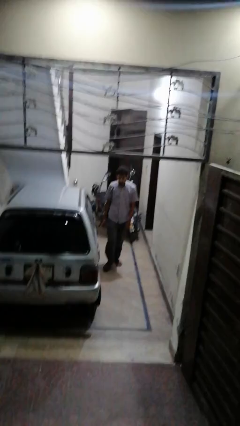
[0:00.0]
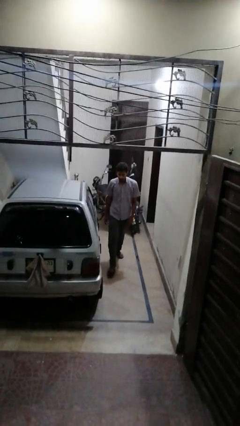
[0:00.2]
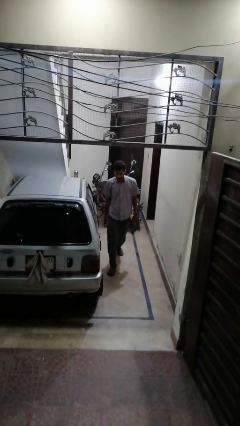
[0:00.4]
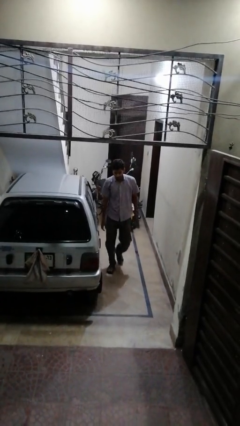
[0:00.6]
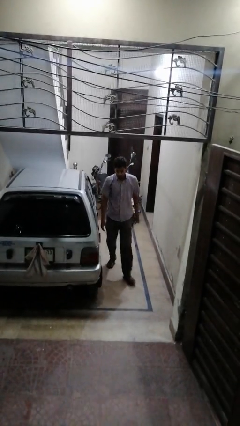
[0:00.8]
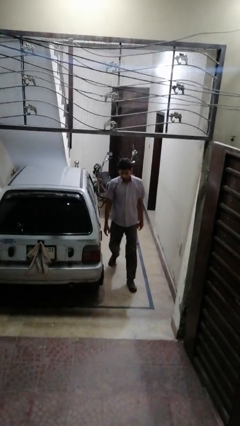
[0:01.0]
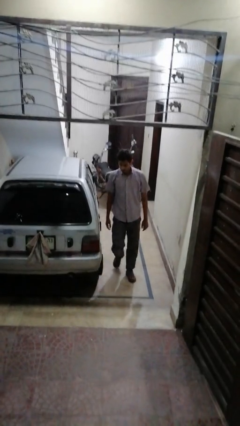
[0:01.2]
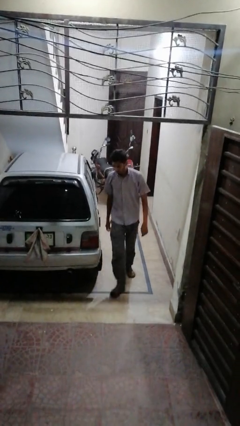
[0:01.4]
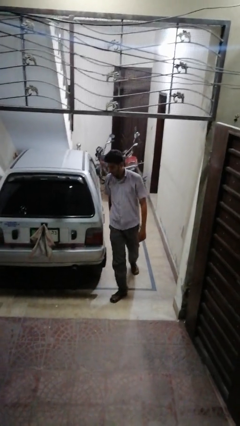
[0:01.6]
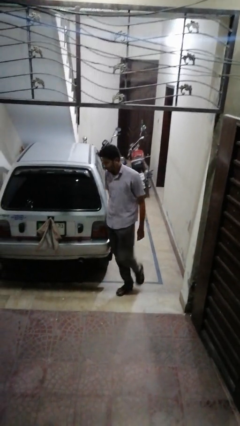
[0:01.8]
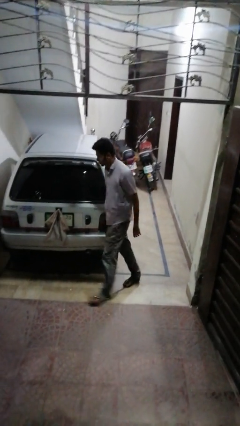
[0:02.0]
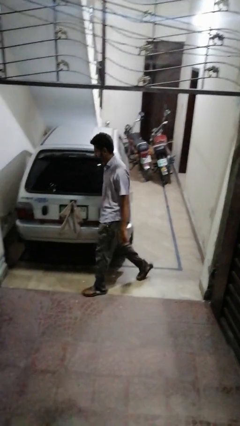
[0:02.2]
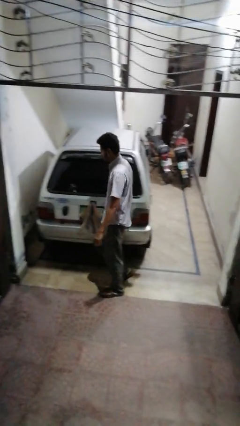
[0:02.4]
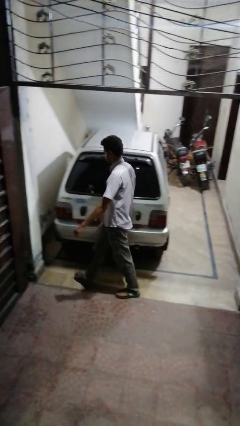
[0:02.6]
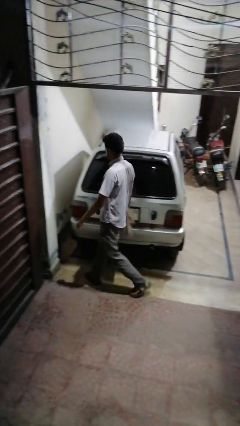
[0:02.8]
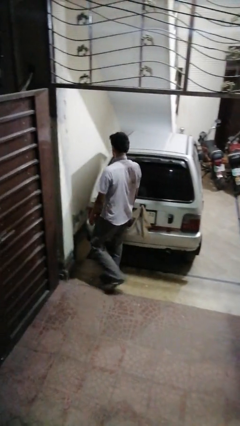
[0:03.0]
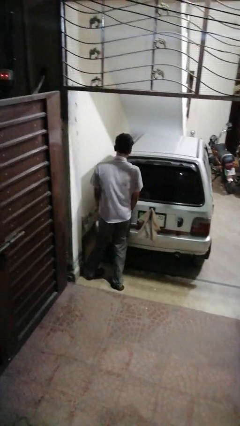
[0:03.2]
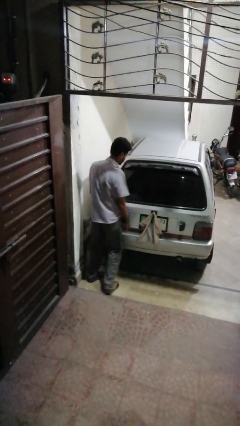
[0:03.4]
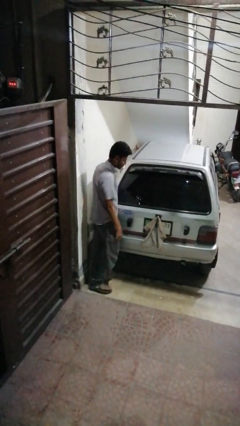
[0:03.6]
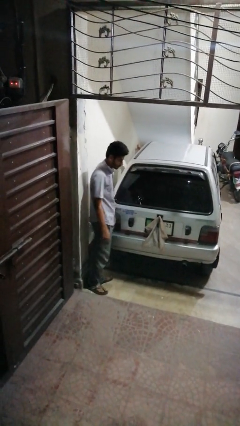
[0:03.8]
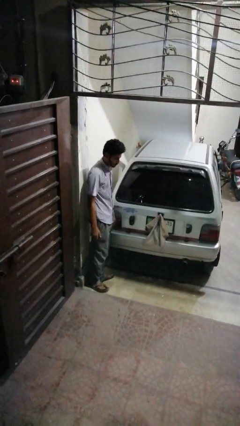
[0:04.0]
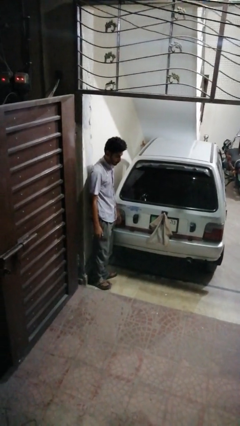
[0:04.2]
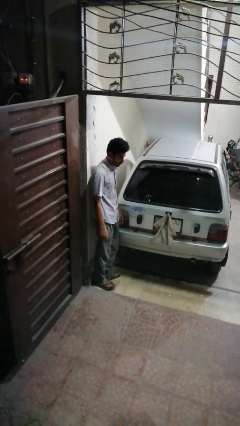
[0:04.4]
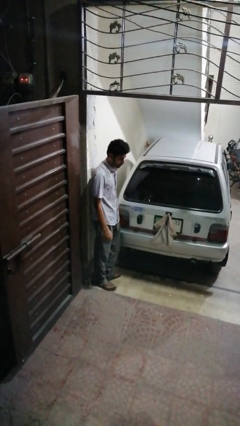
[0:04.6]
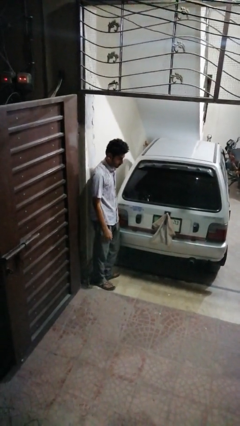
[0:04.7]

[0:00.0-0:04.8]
person walks around car

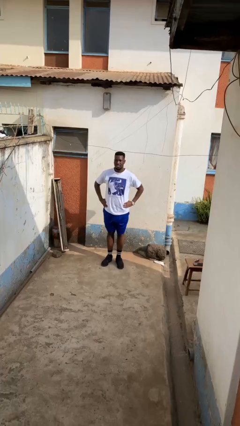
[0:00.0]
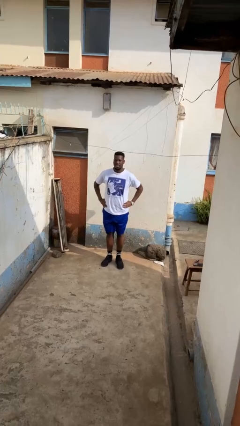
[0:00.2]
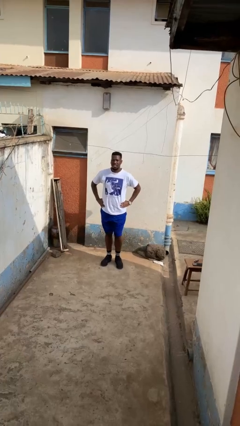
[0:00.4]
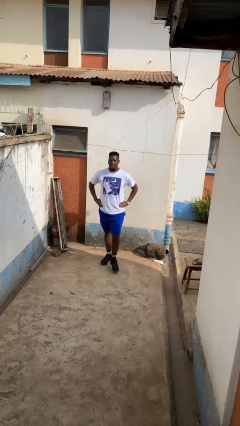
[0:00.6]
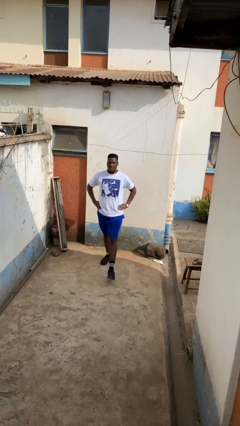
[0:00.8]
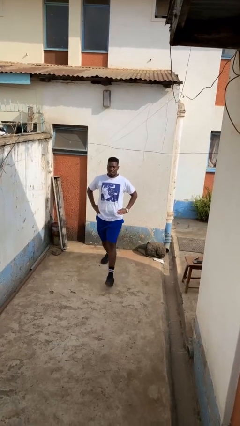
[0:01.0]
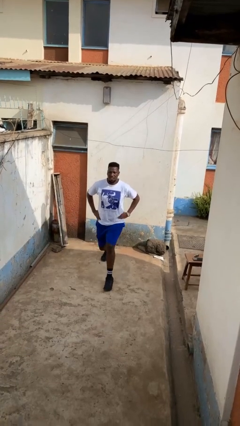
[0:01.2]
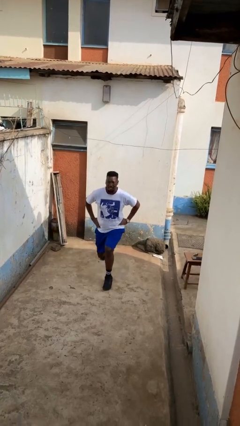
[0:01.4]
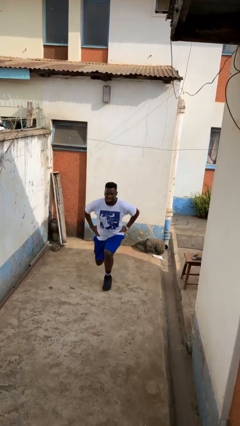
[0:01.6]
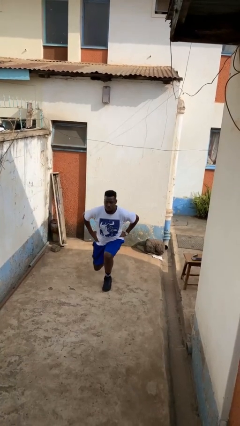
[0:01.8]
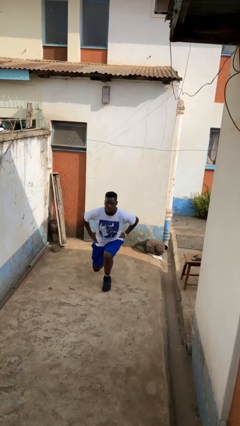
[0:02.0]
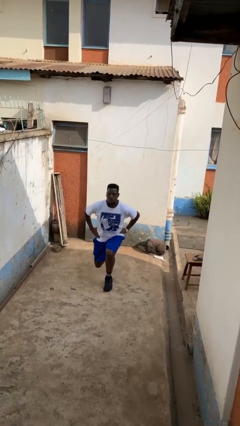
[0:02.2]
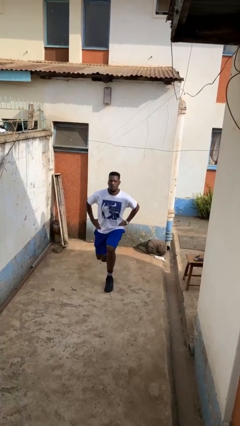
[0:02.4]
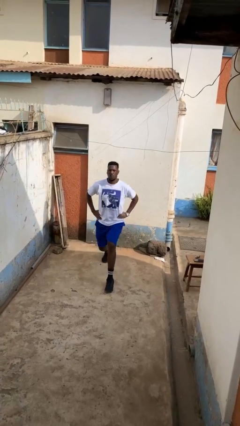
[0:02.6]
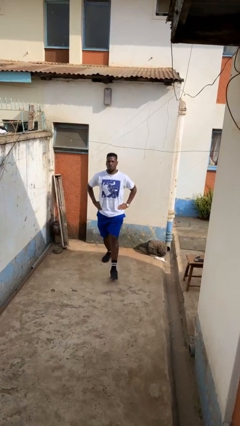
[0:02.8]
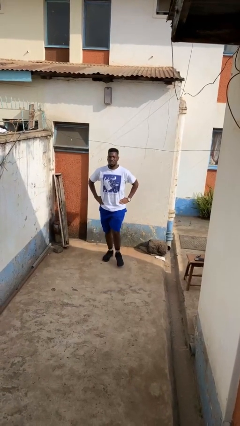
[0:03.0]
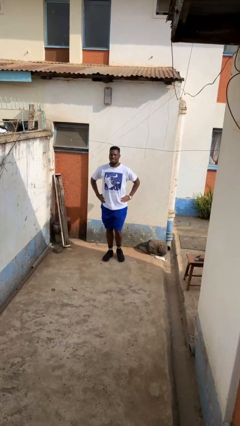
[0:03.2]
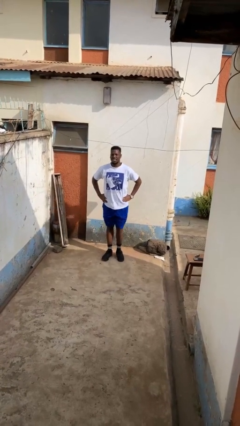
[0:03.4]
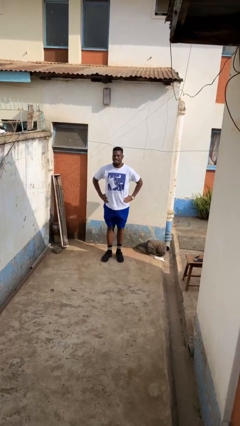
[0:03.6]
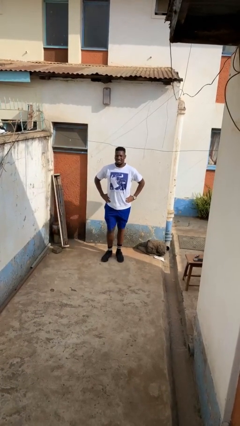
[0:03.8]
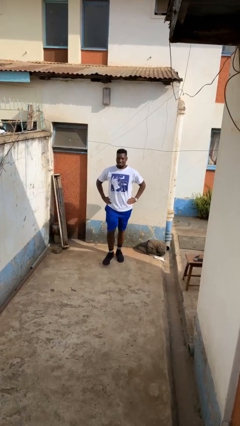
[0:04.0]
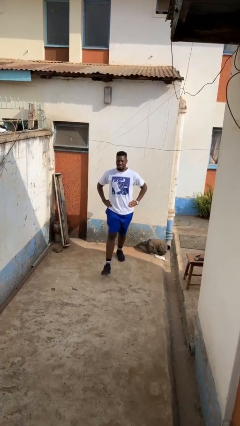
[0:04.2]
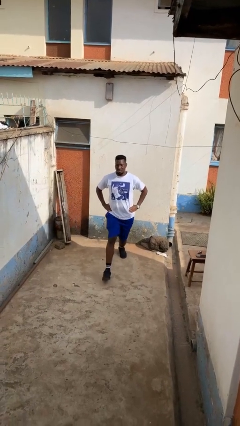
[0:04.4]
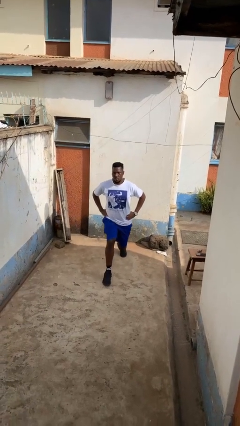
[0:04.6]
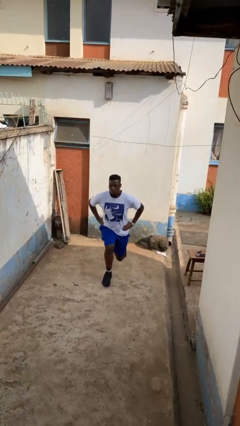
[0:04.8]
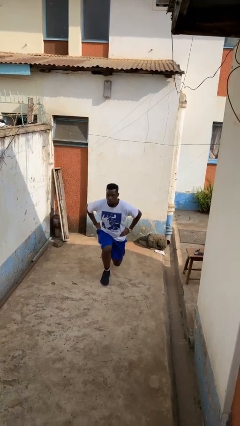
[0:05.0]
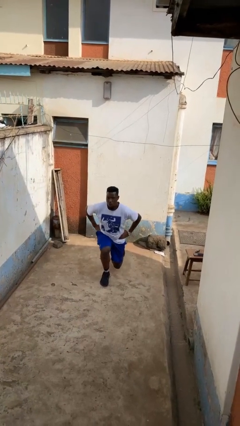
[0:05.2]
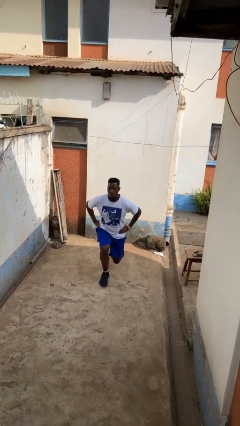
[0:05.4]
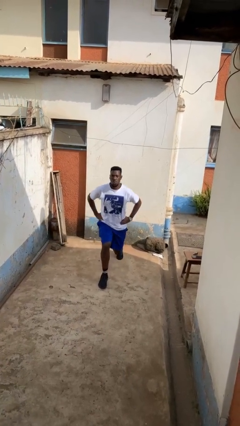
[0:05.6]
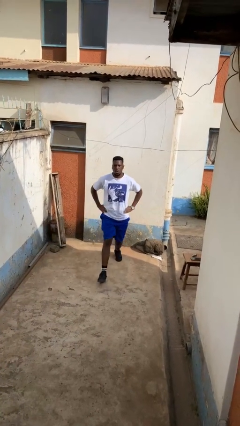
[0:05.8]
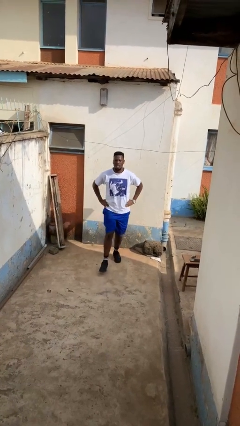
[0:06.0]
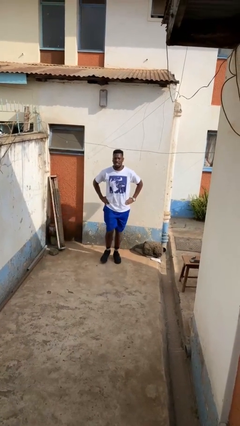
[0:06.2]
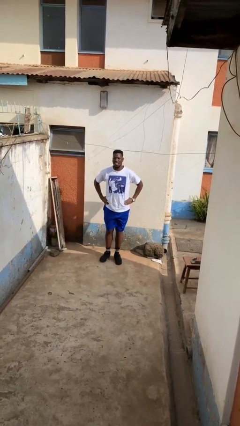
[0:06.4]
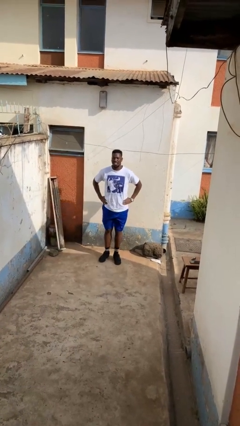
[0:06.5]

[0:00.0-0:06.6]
person exercises with lunges

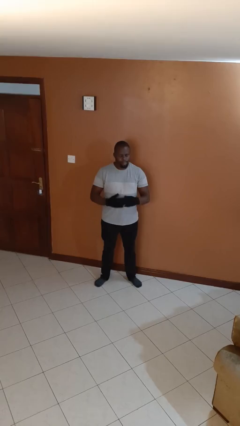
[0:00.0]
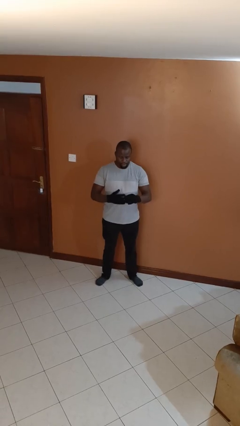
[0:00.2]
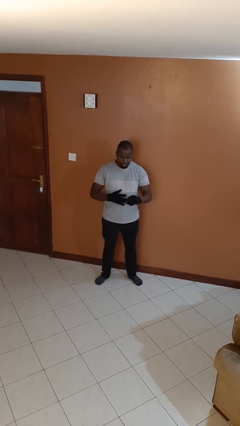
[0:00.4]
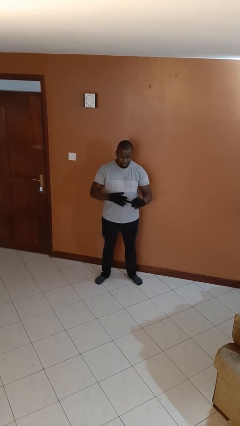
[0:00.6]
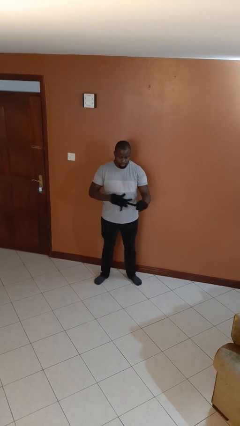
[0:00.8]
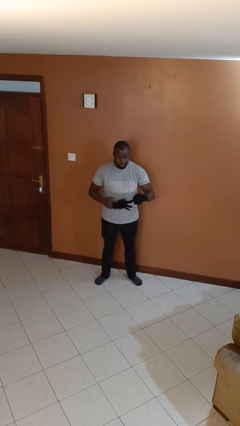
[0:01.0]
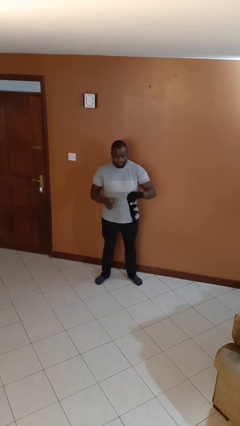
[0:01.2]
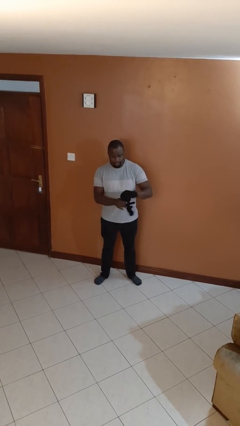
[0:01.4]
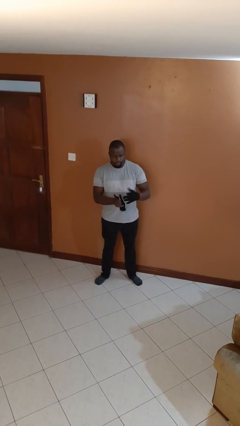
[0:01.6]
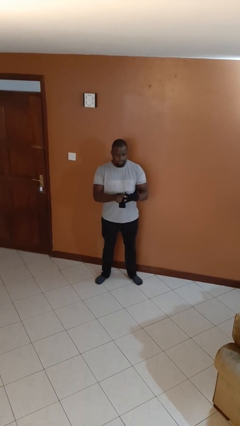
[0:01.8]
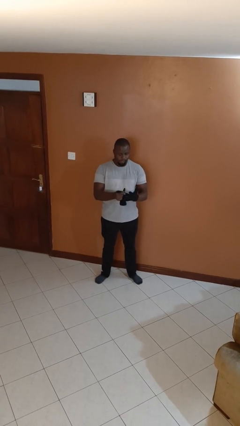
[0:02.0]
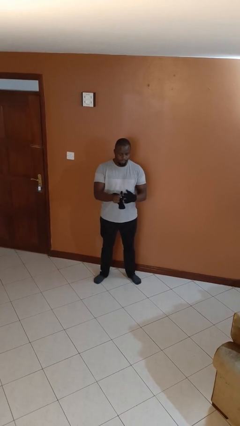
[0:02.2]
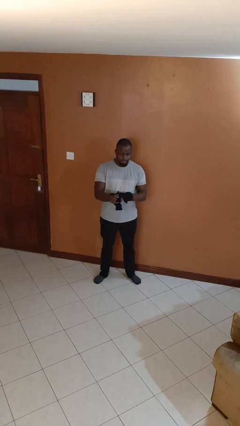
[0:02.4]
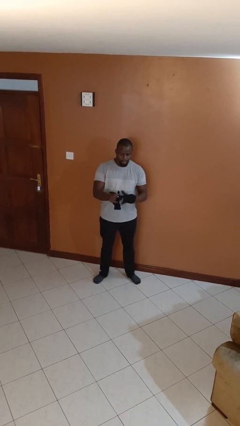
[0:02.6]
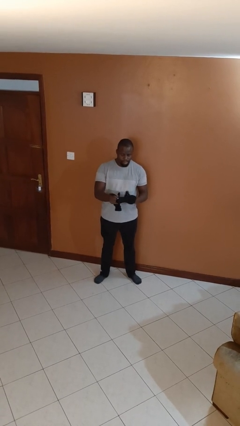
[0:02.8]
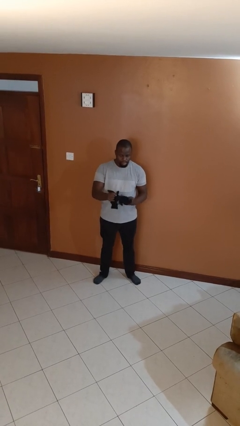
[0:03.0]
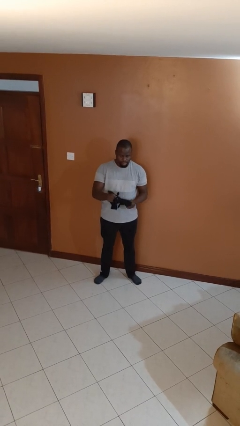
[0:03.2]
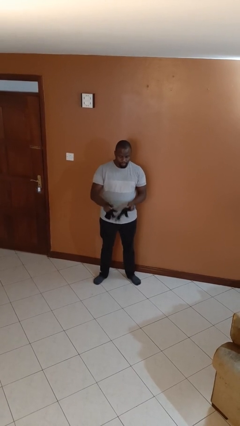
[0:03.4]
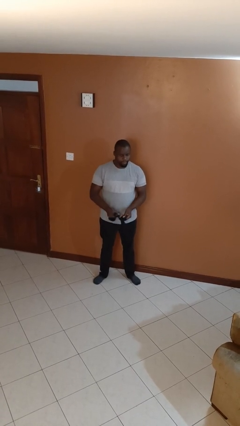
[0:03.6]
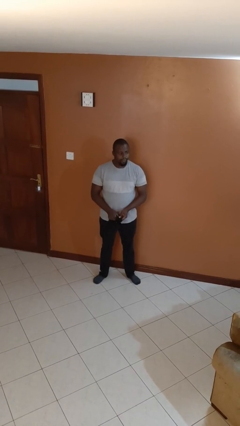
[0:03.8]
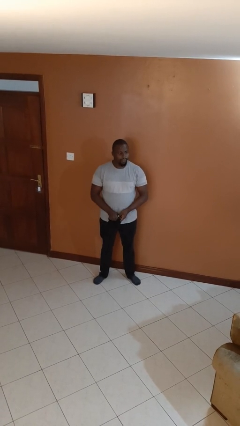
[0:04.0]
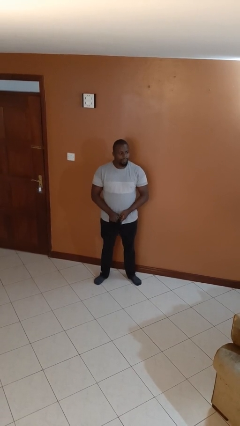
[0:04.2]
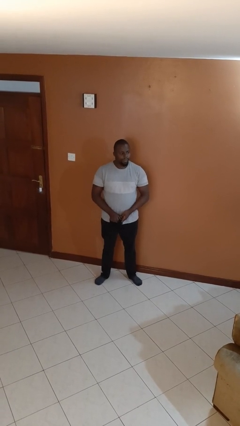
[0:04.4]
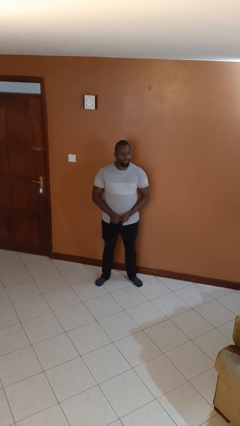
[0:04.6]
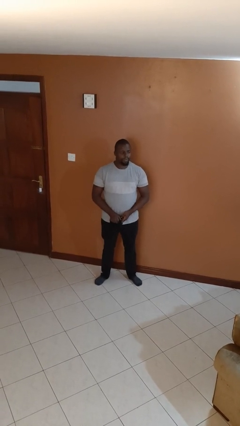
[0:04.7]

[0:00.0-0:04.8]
person takes off gloves

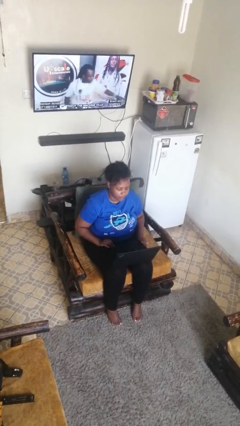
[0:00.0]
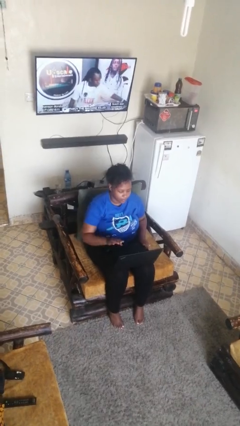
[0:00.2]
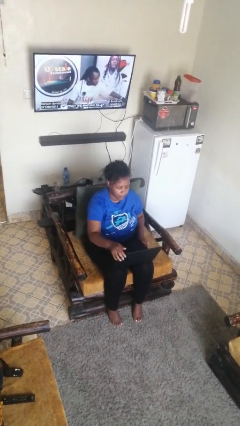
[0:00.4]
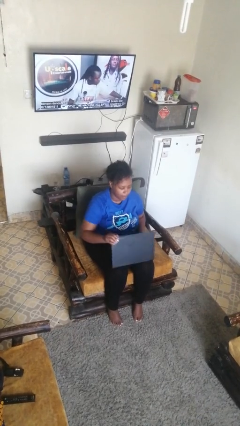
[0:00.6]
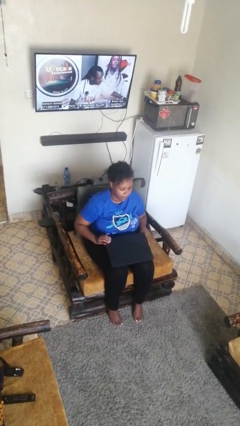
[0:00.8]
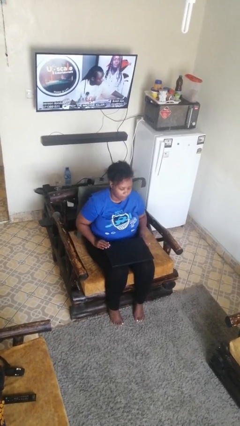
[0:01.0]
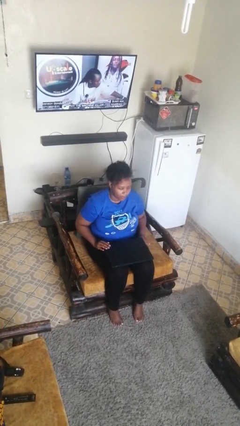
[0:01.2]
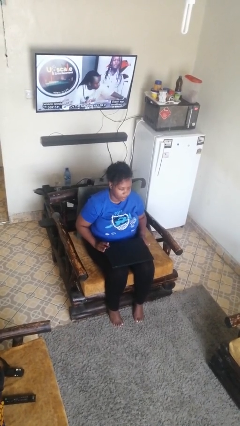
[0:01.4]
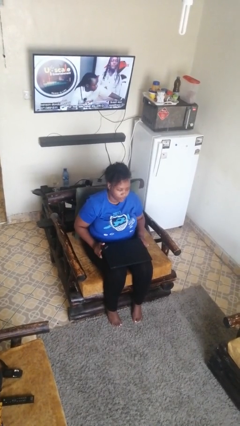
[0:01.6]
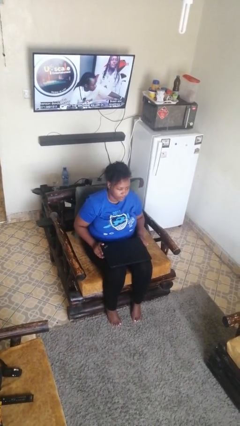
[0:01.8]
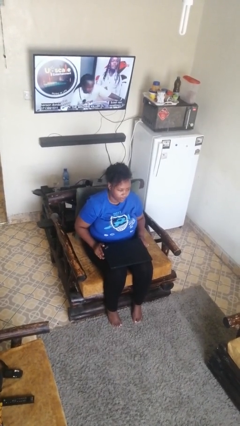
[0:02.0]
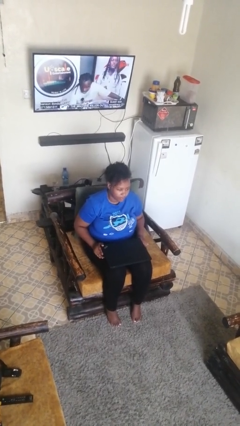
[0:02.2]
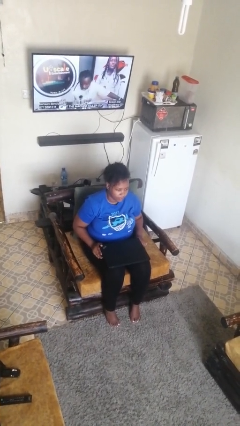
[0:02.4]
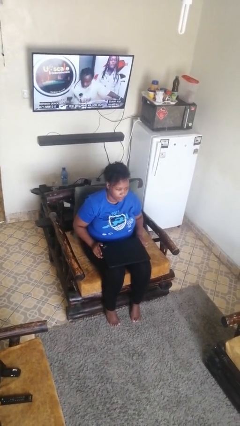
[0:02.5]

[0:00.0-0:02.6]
person closes laptop
